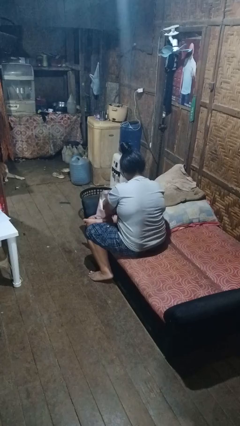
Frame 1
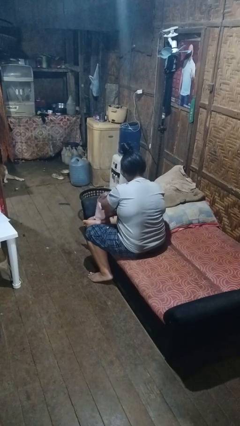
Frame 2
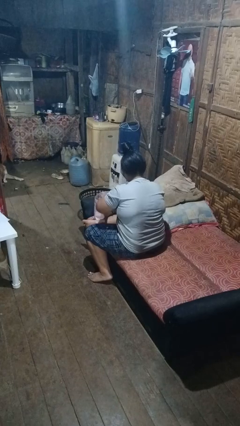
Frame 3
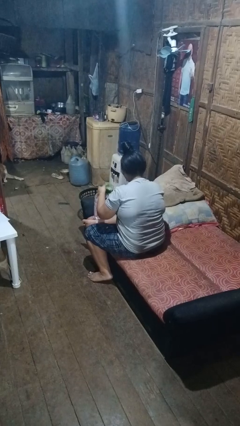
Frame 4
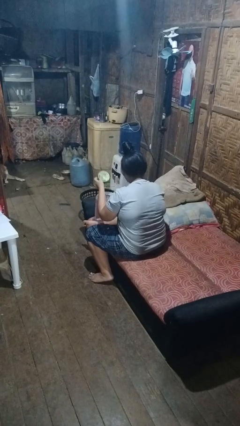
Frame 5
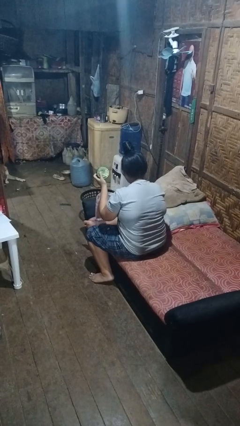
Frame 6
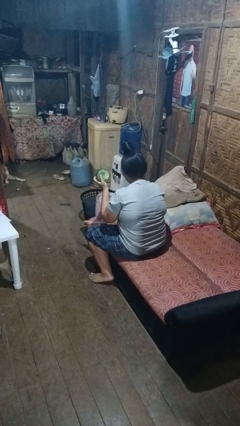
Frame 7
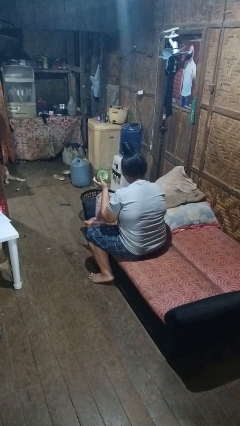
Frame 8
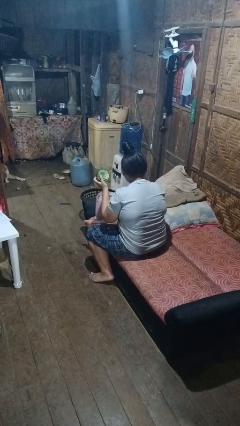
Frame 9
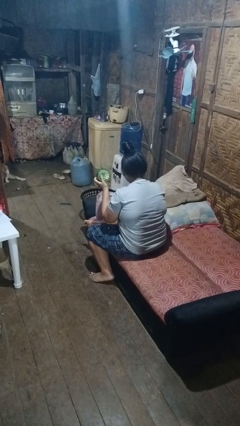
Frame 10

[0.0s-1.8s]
person takes object from bag

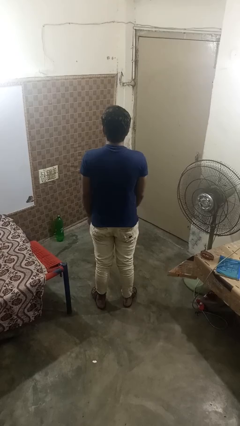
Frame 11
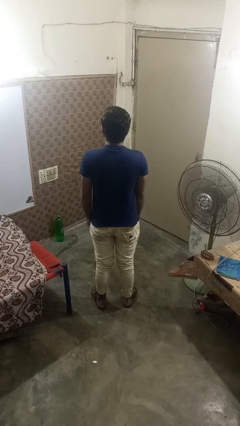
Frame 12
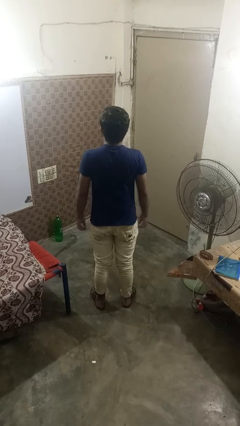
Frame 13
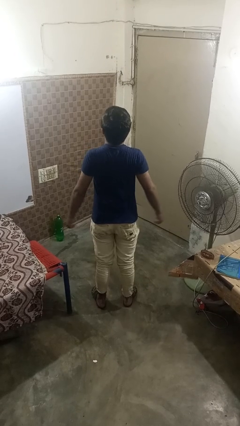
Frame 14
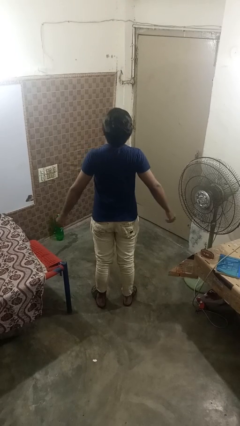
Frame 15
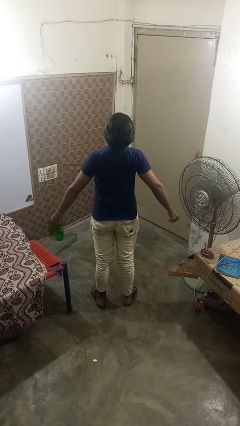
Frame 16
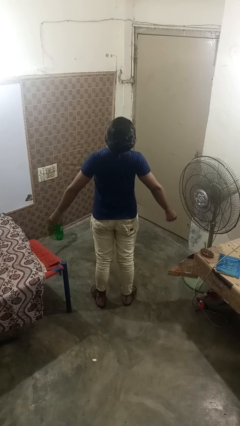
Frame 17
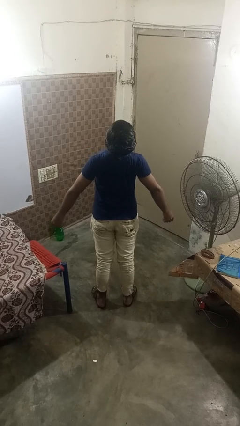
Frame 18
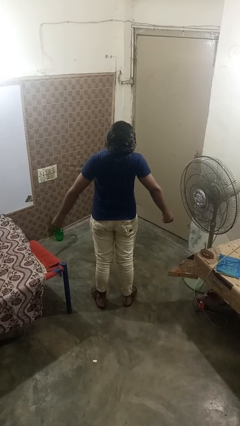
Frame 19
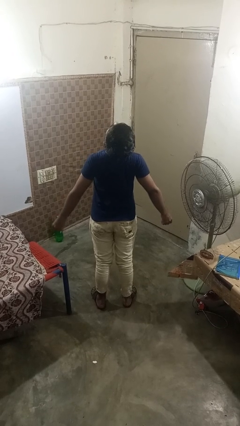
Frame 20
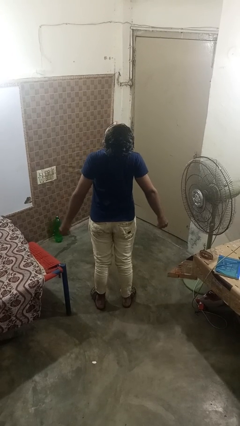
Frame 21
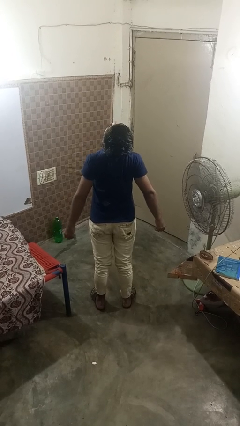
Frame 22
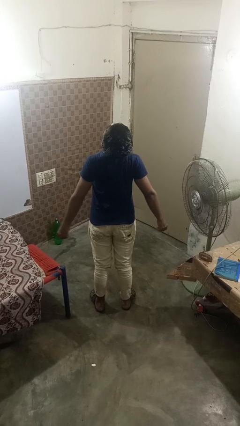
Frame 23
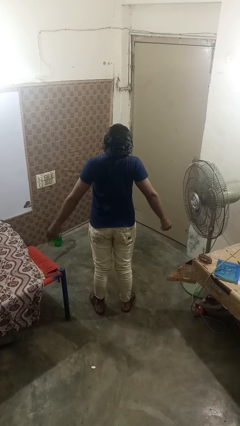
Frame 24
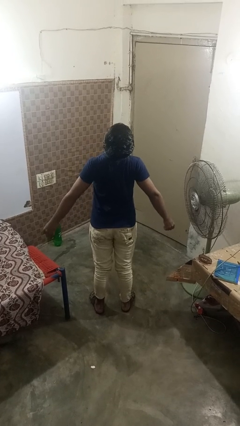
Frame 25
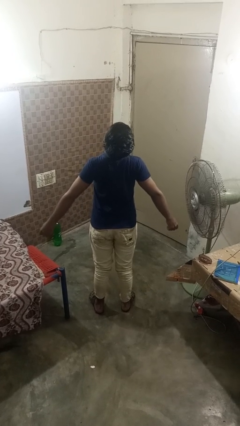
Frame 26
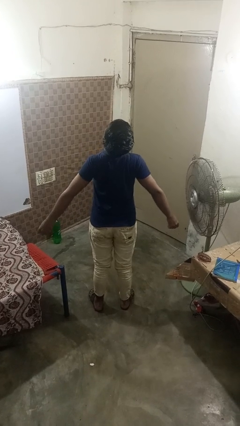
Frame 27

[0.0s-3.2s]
person stretches back

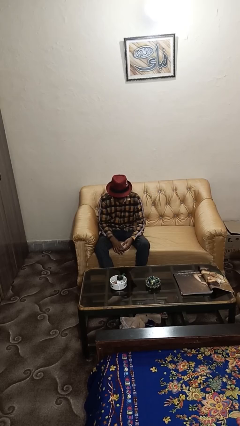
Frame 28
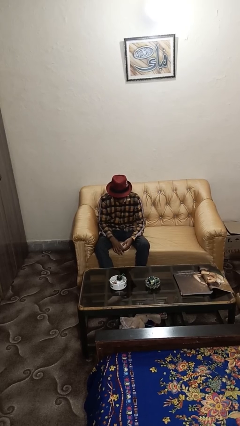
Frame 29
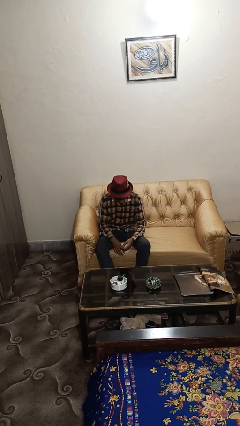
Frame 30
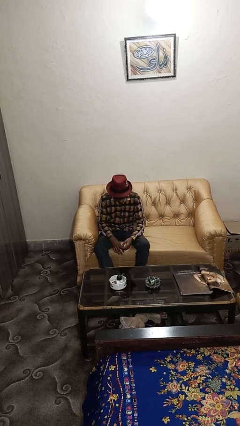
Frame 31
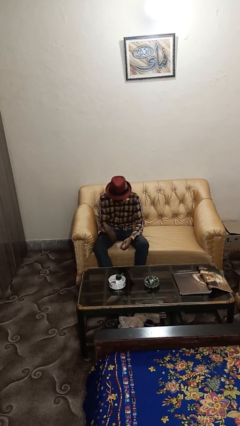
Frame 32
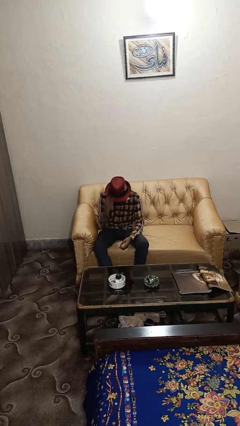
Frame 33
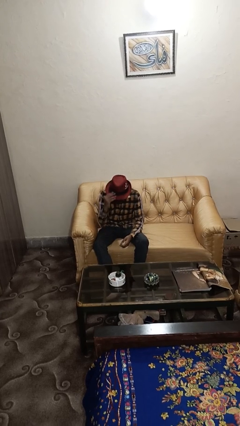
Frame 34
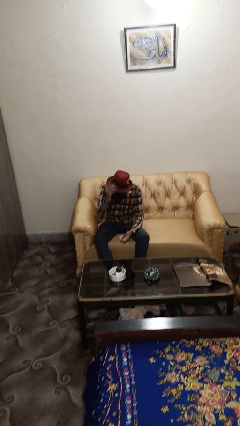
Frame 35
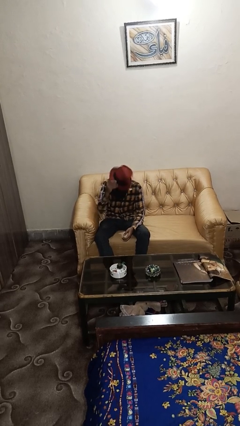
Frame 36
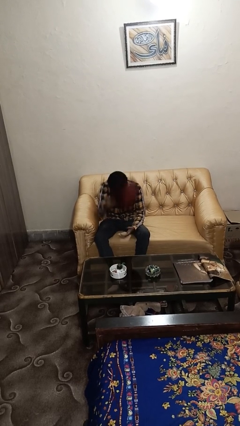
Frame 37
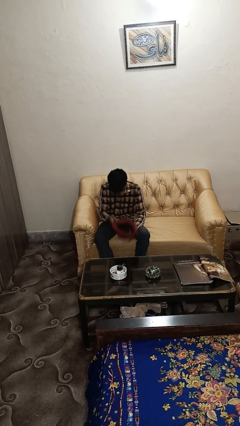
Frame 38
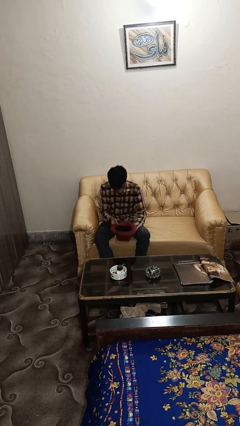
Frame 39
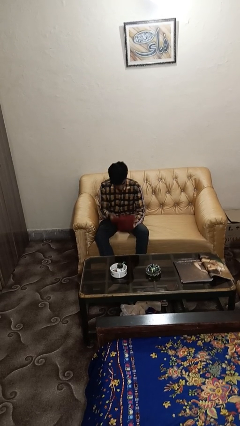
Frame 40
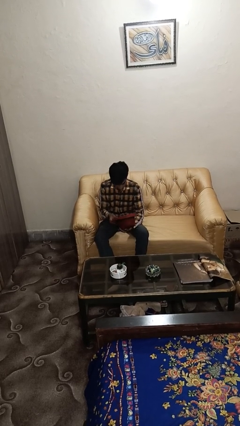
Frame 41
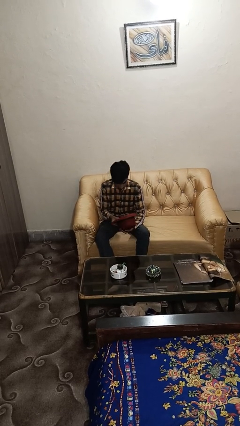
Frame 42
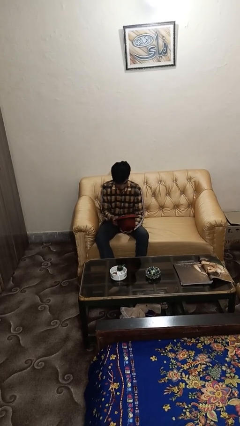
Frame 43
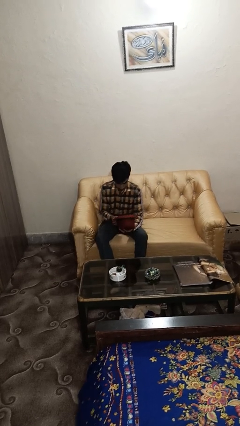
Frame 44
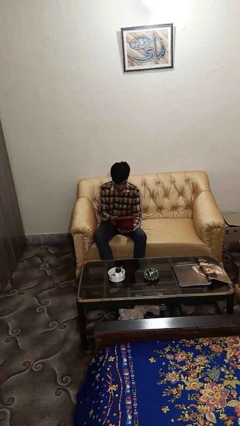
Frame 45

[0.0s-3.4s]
person takes off hat

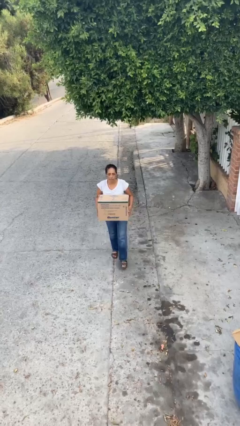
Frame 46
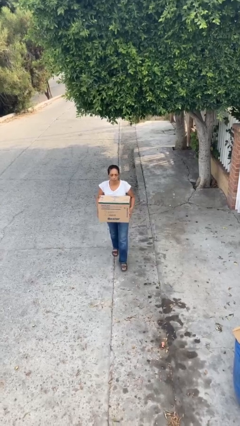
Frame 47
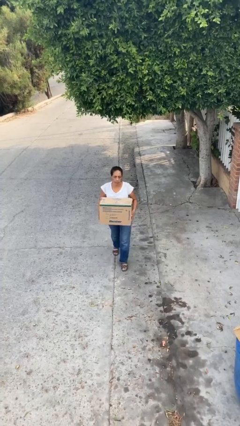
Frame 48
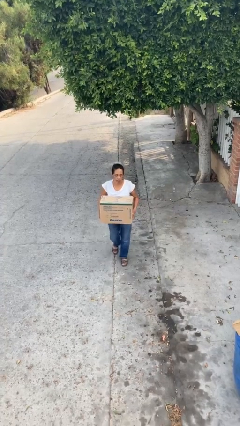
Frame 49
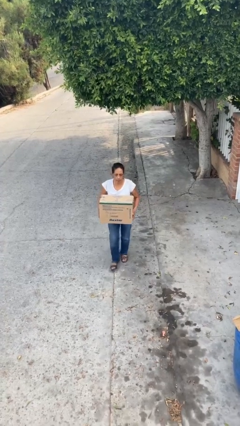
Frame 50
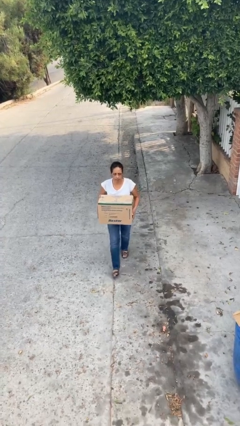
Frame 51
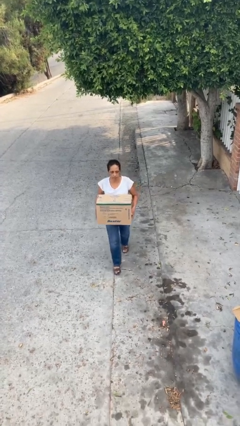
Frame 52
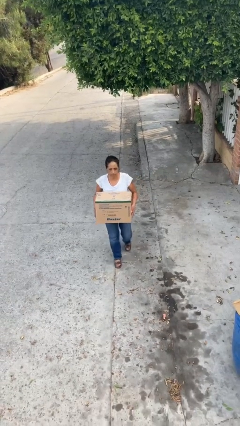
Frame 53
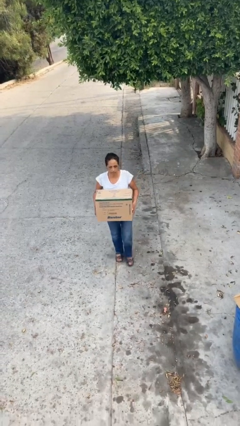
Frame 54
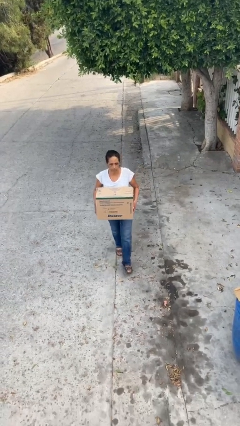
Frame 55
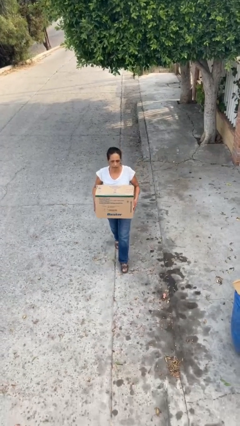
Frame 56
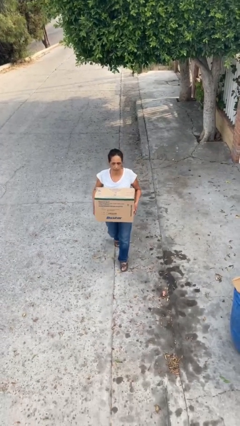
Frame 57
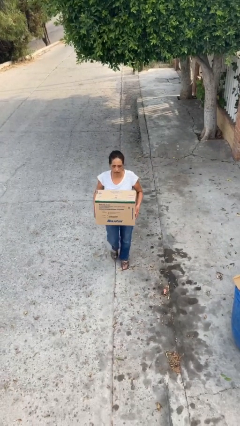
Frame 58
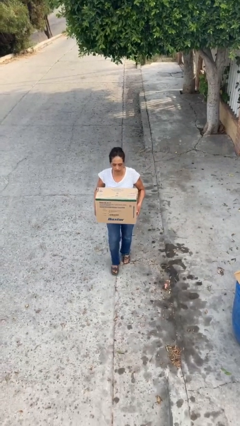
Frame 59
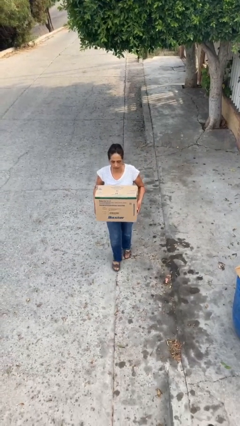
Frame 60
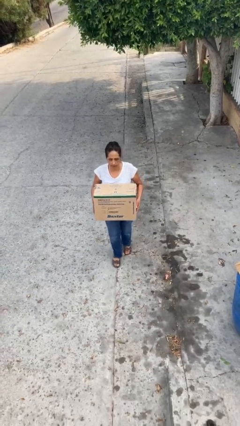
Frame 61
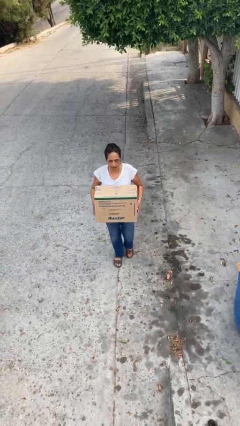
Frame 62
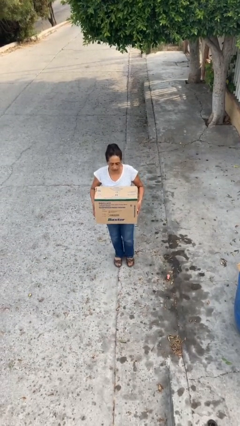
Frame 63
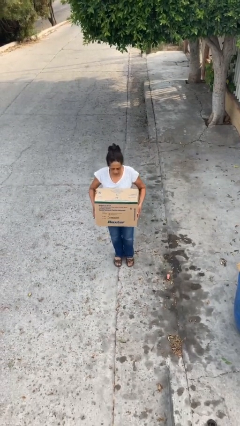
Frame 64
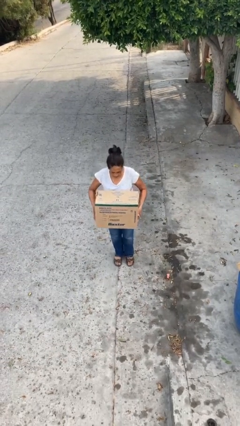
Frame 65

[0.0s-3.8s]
person carries heavy object

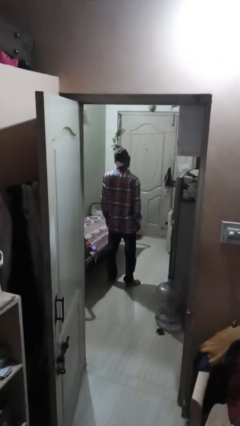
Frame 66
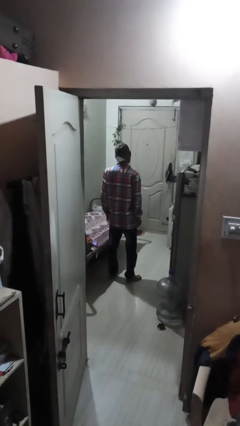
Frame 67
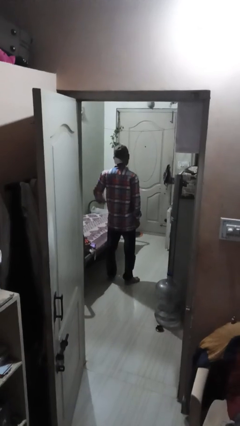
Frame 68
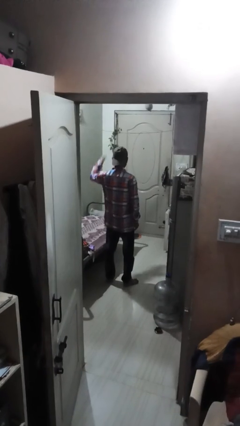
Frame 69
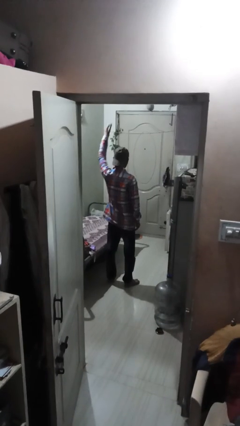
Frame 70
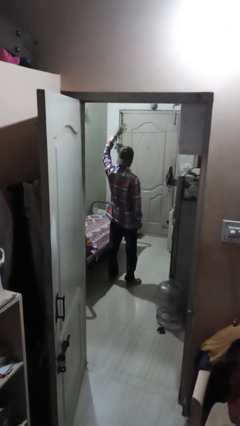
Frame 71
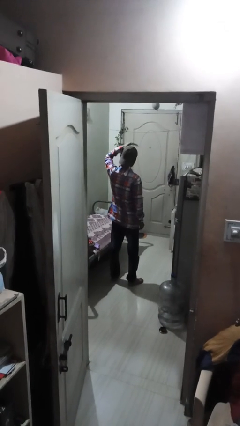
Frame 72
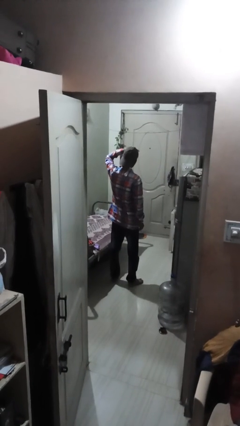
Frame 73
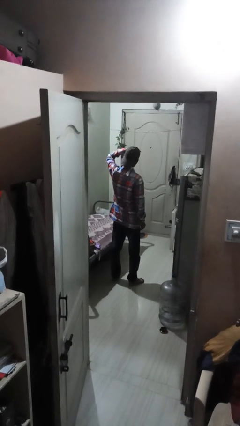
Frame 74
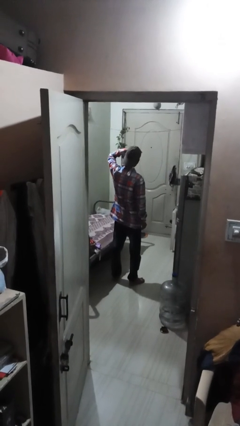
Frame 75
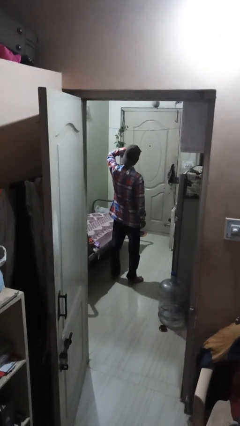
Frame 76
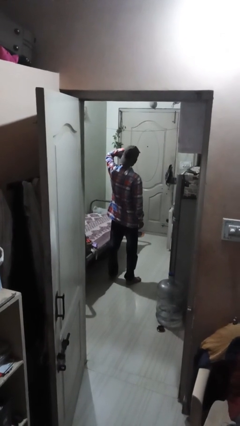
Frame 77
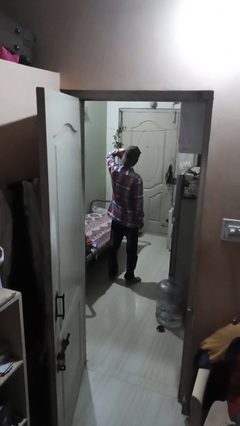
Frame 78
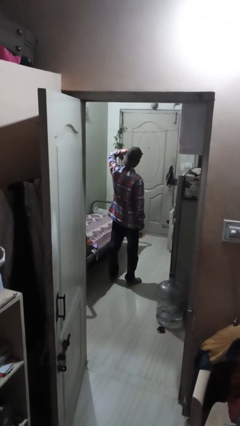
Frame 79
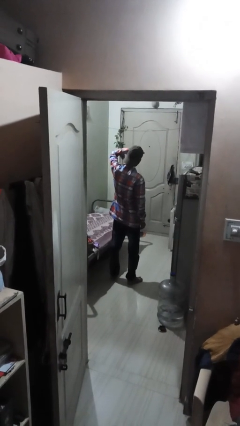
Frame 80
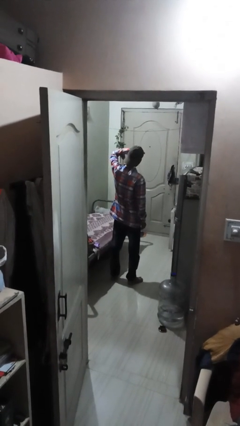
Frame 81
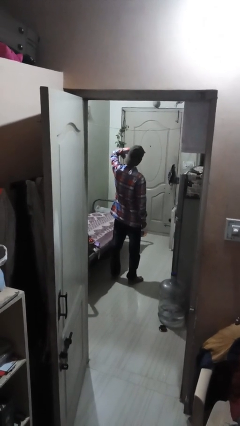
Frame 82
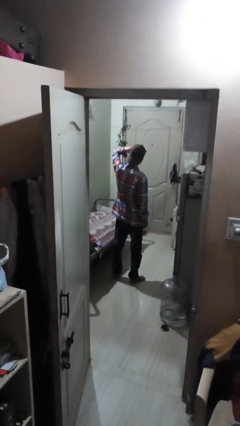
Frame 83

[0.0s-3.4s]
person shades eyes

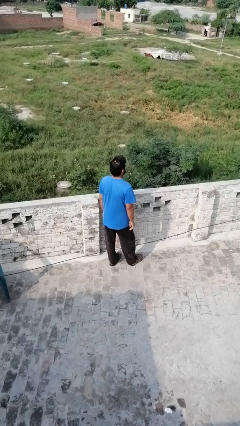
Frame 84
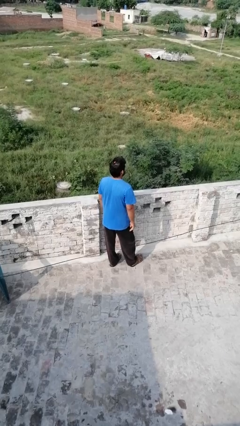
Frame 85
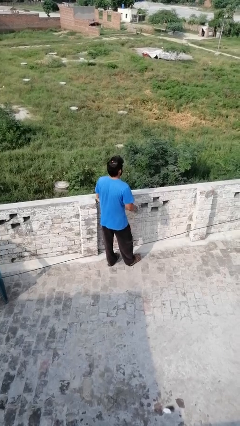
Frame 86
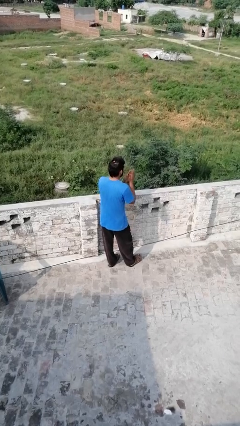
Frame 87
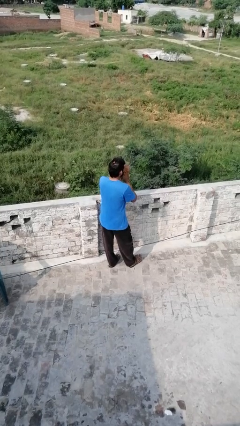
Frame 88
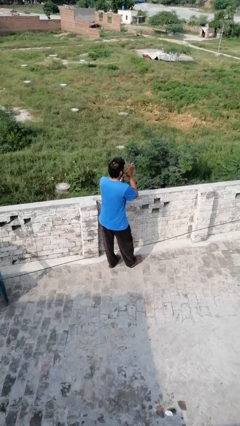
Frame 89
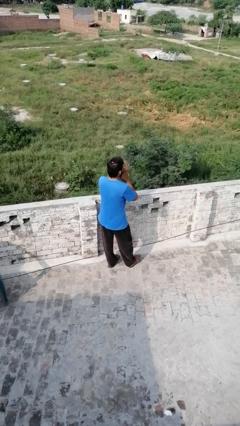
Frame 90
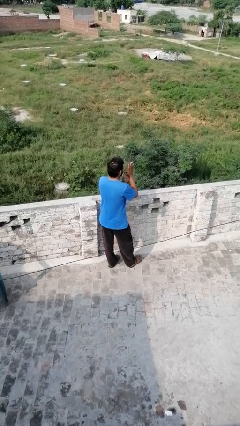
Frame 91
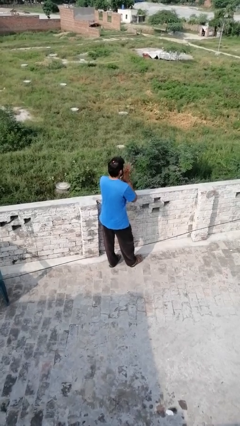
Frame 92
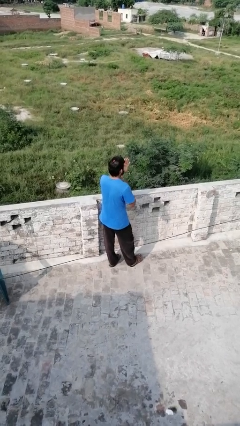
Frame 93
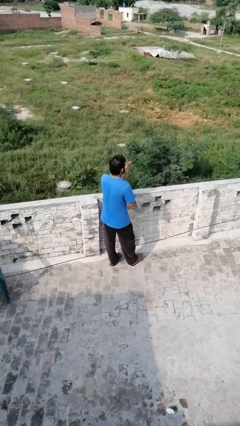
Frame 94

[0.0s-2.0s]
person blows into hands
